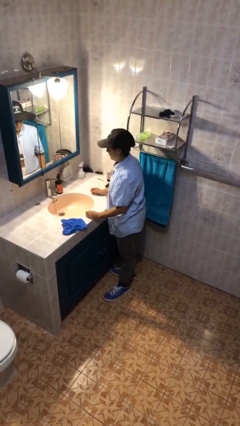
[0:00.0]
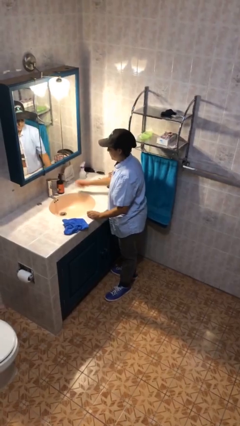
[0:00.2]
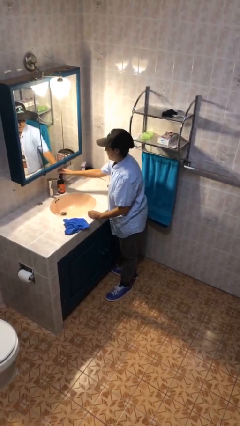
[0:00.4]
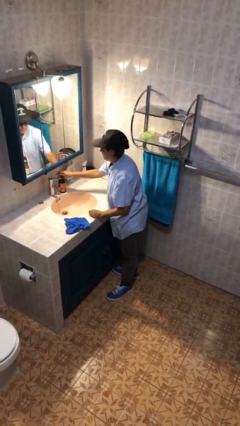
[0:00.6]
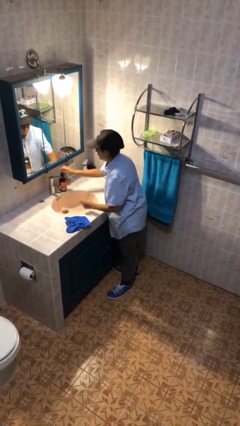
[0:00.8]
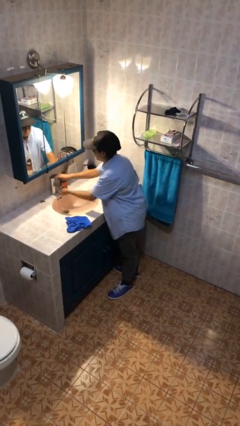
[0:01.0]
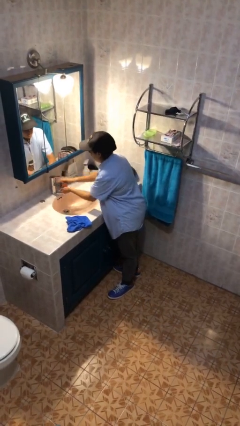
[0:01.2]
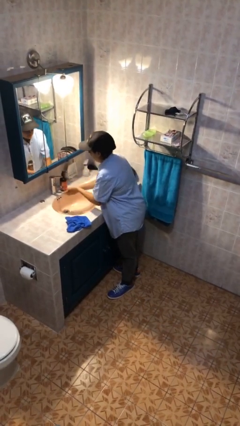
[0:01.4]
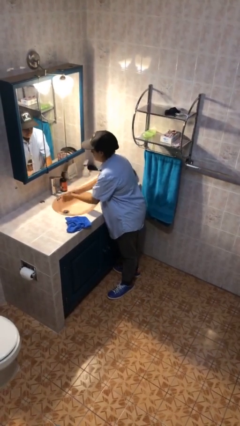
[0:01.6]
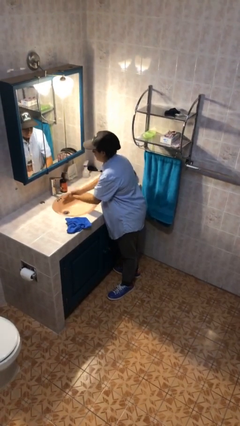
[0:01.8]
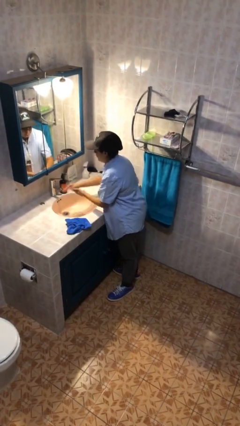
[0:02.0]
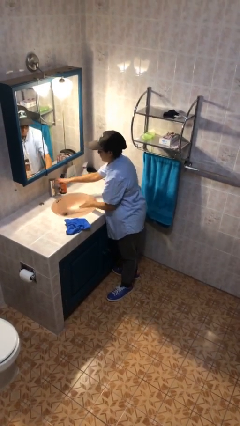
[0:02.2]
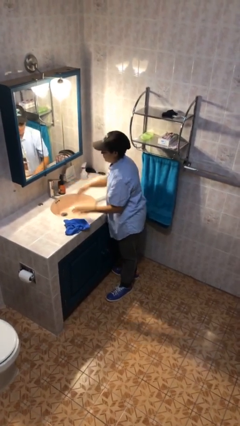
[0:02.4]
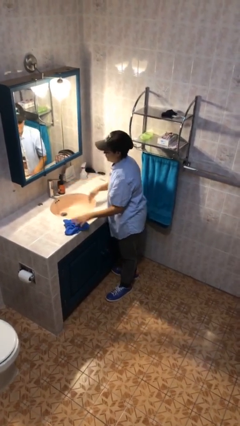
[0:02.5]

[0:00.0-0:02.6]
person washes hands

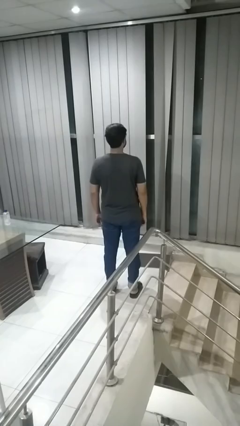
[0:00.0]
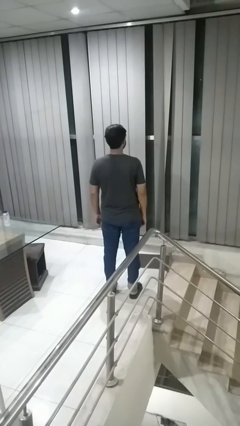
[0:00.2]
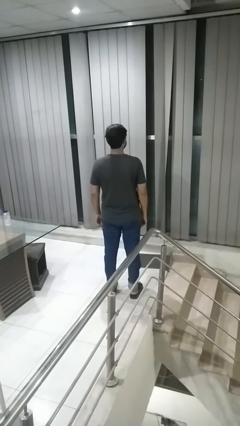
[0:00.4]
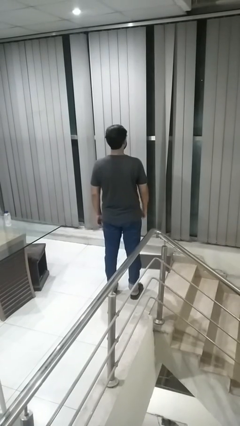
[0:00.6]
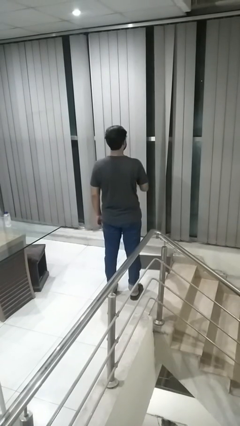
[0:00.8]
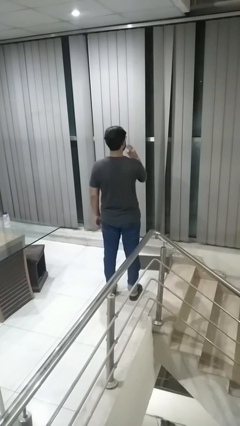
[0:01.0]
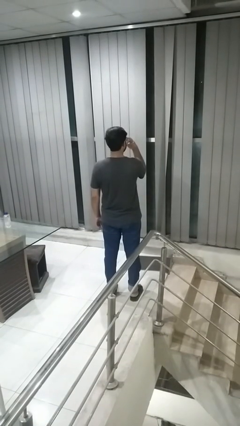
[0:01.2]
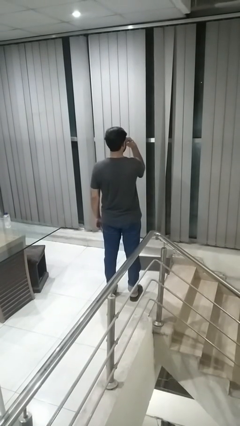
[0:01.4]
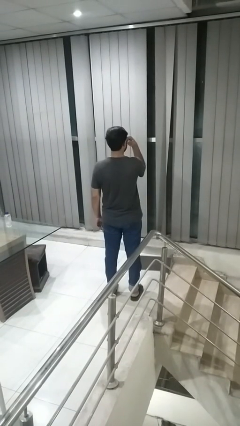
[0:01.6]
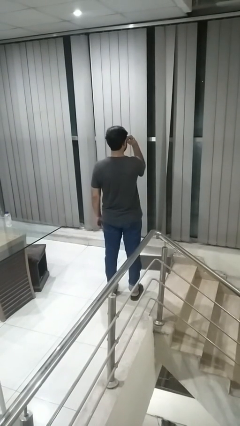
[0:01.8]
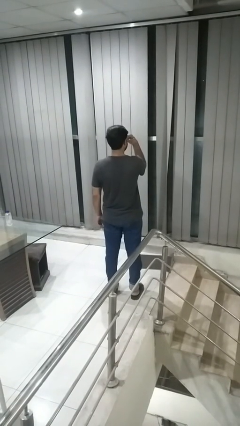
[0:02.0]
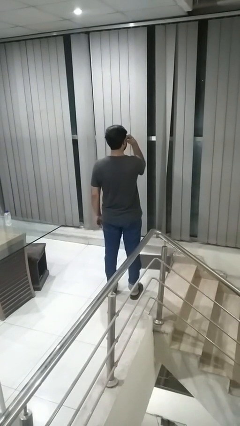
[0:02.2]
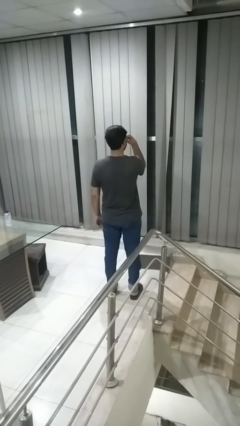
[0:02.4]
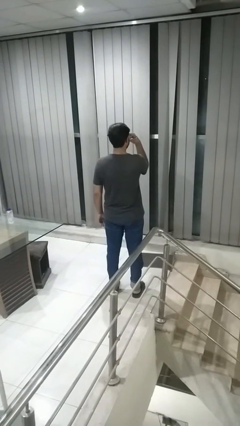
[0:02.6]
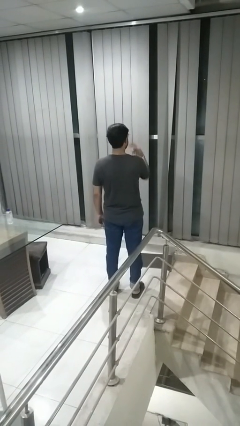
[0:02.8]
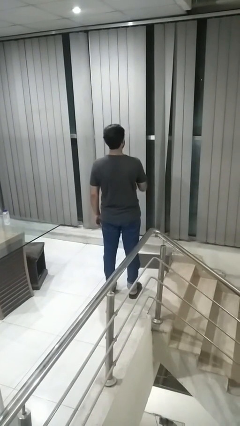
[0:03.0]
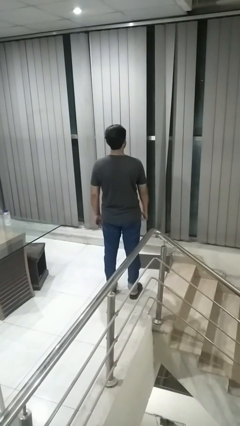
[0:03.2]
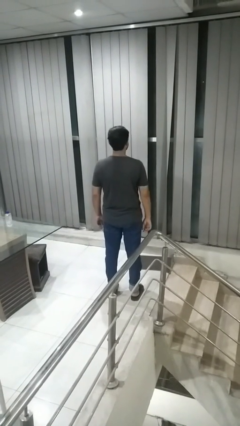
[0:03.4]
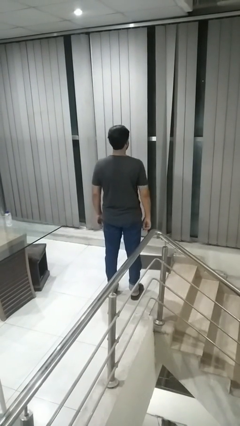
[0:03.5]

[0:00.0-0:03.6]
person gestures watch closely

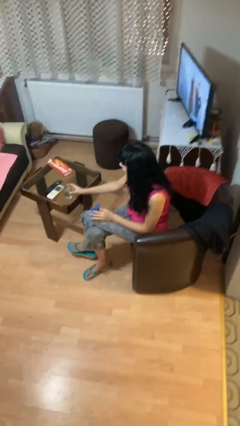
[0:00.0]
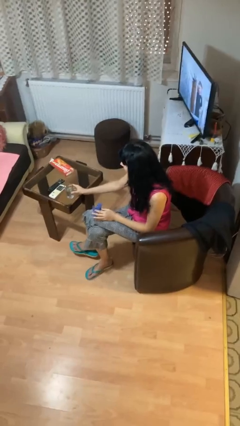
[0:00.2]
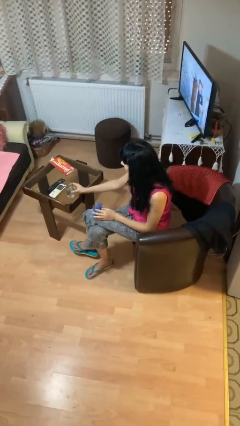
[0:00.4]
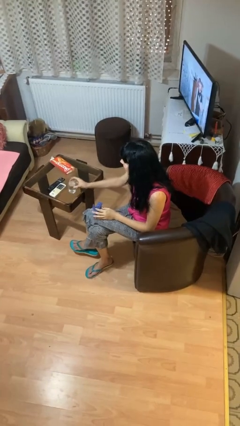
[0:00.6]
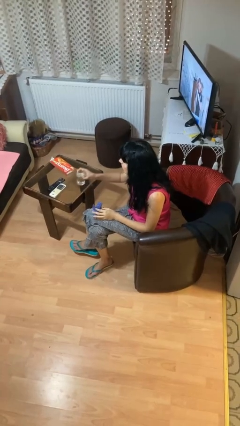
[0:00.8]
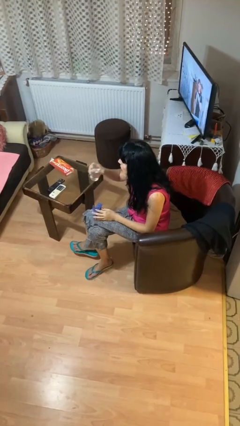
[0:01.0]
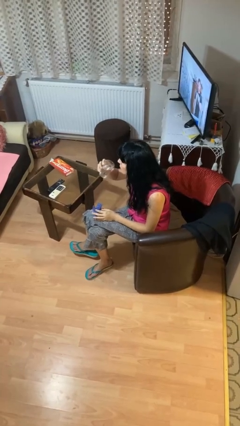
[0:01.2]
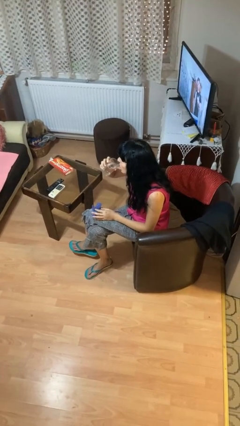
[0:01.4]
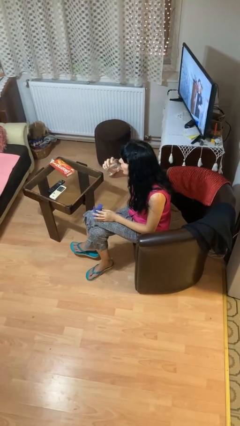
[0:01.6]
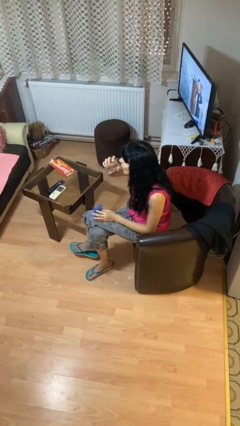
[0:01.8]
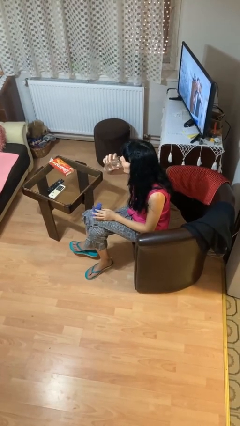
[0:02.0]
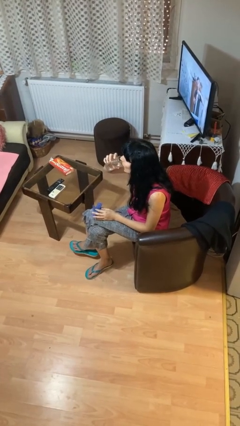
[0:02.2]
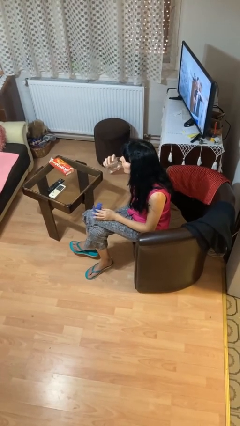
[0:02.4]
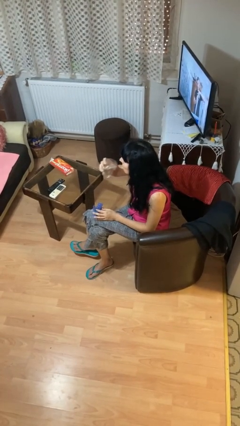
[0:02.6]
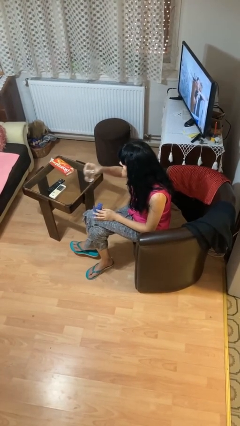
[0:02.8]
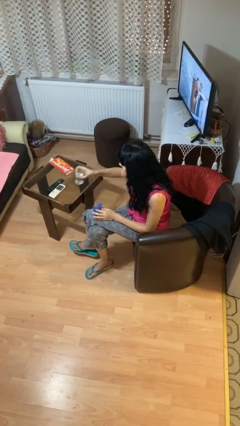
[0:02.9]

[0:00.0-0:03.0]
person drinks from cup

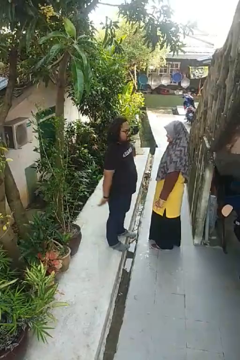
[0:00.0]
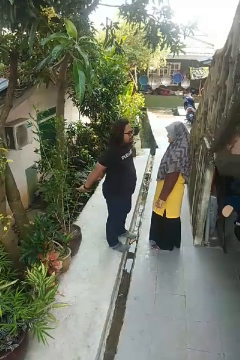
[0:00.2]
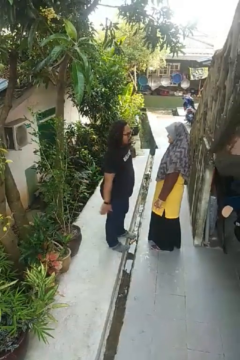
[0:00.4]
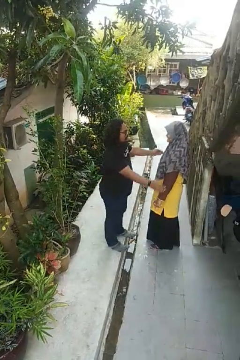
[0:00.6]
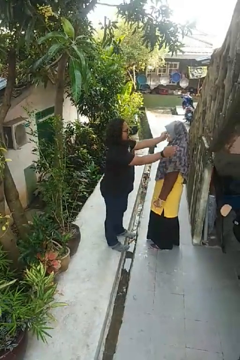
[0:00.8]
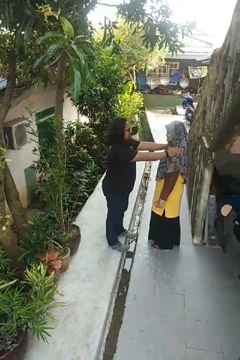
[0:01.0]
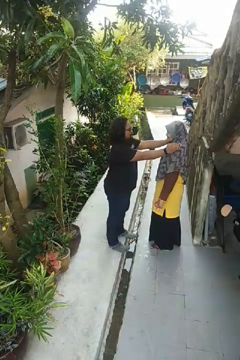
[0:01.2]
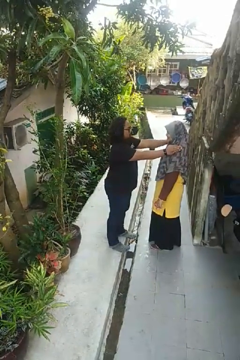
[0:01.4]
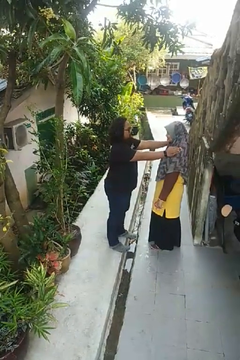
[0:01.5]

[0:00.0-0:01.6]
person pounds shoulders of person

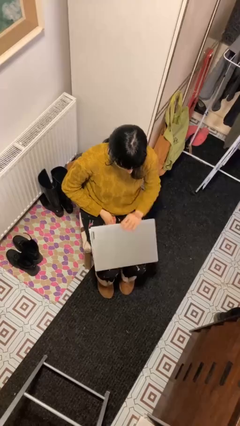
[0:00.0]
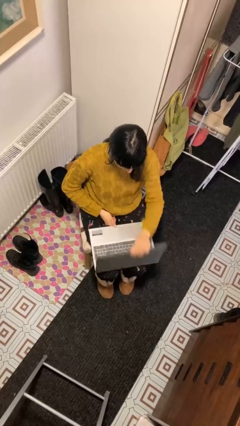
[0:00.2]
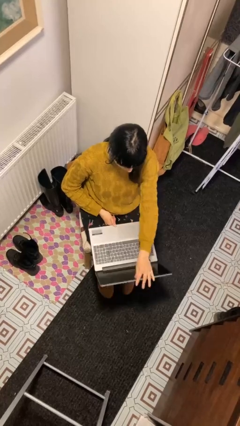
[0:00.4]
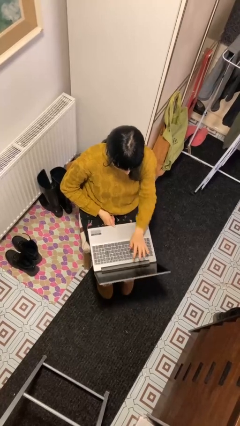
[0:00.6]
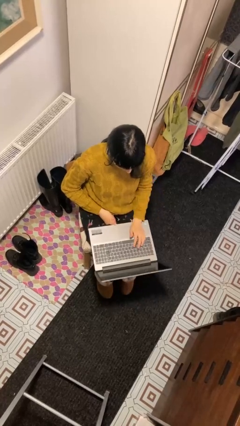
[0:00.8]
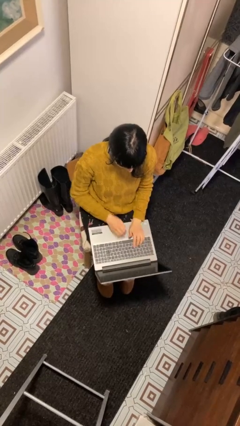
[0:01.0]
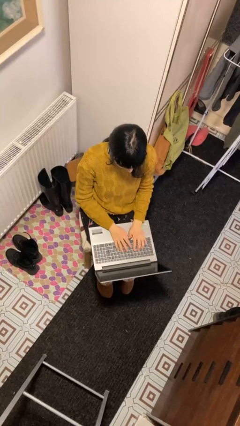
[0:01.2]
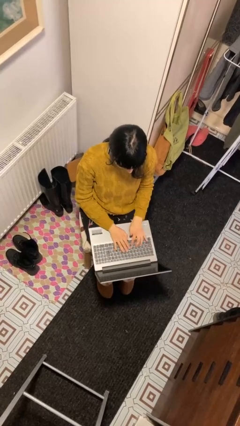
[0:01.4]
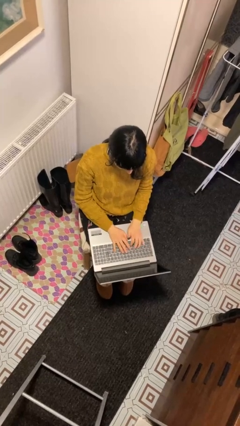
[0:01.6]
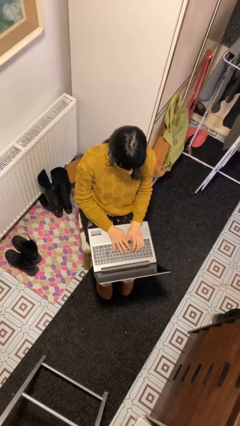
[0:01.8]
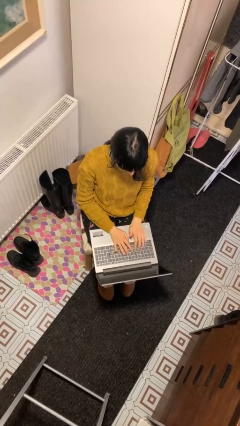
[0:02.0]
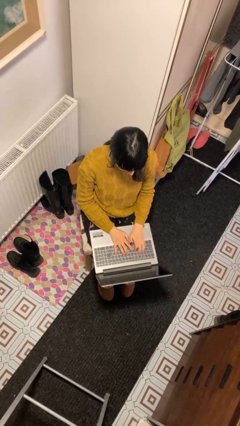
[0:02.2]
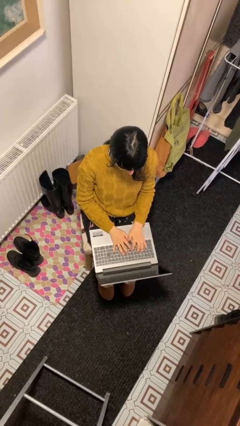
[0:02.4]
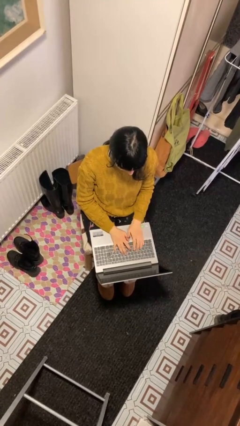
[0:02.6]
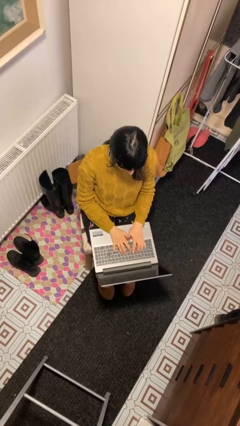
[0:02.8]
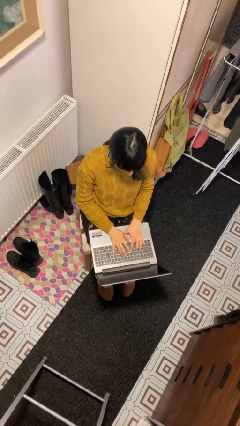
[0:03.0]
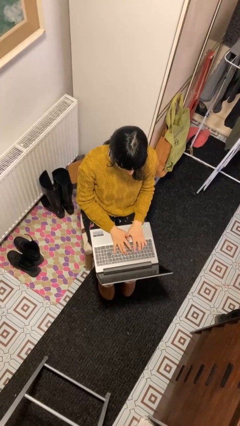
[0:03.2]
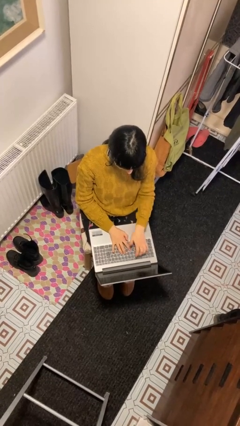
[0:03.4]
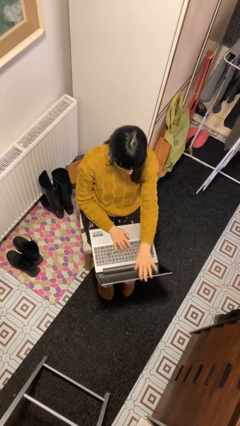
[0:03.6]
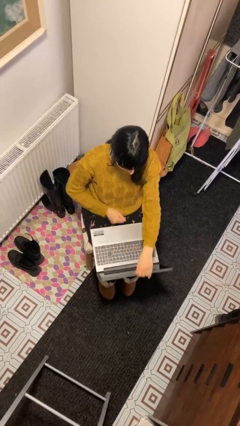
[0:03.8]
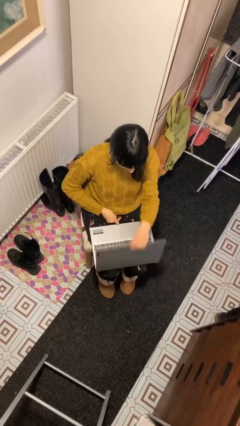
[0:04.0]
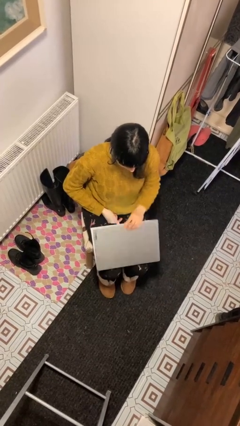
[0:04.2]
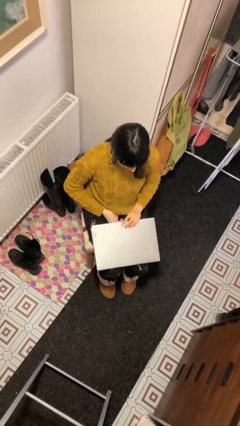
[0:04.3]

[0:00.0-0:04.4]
person interacts with laptop

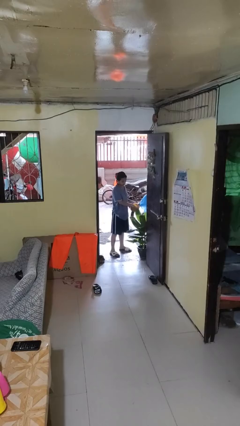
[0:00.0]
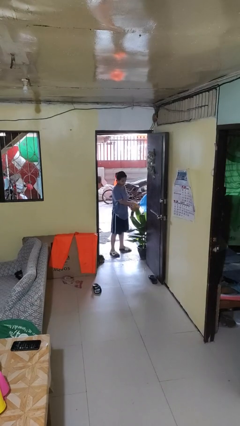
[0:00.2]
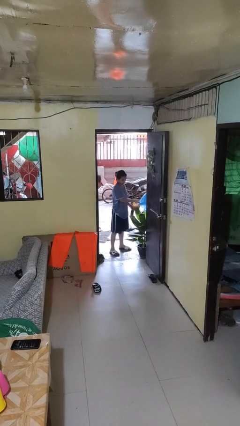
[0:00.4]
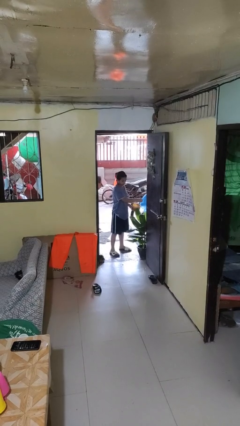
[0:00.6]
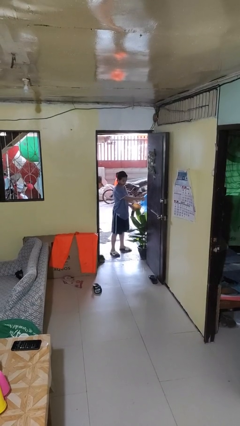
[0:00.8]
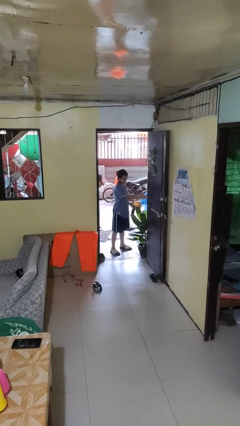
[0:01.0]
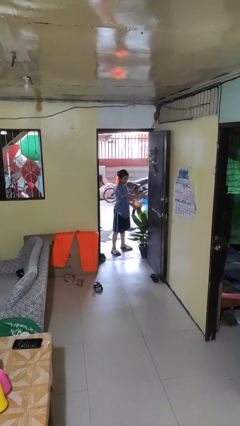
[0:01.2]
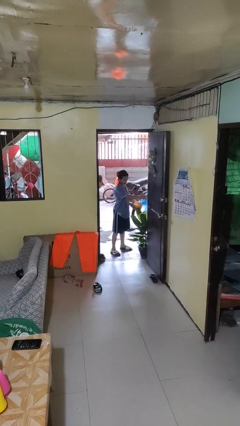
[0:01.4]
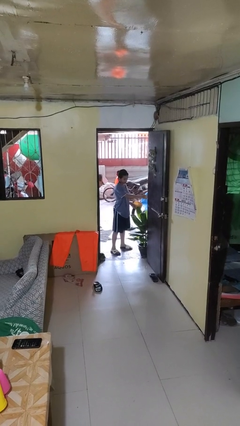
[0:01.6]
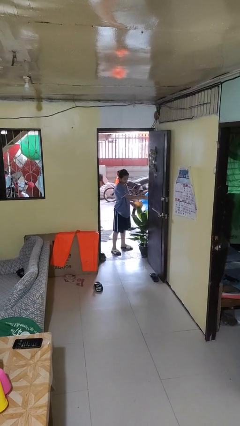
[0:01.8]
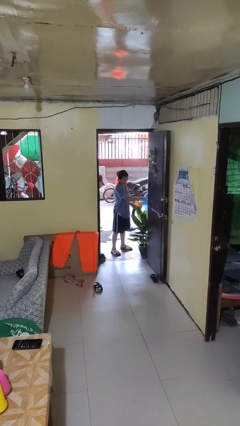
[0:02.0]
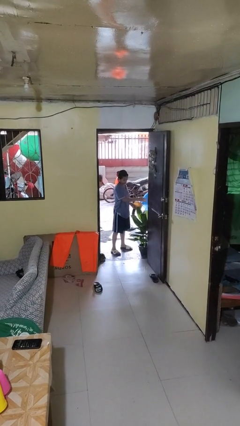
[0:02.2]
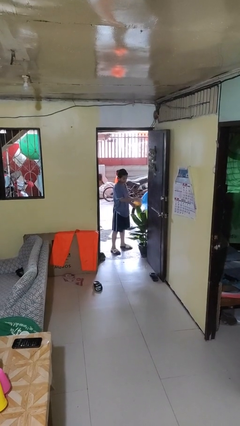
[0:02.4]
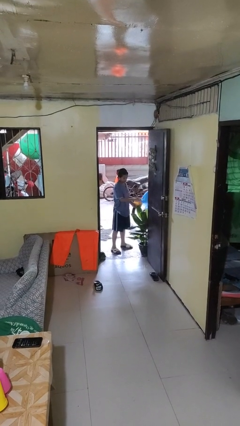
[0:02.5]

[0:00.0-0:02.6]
person waters houseplant
